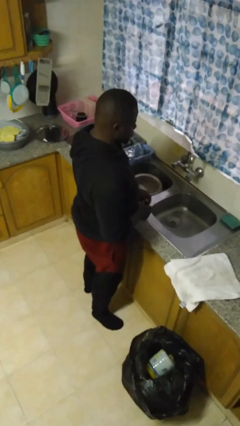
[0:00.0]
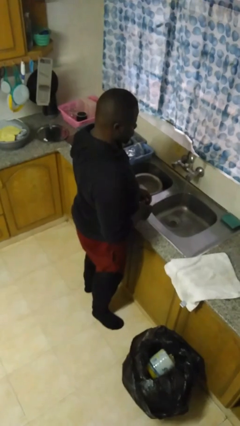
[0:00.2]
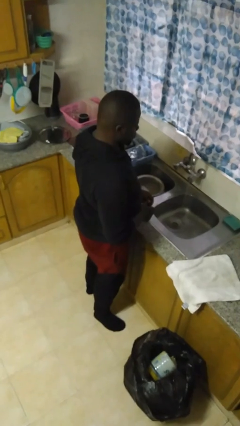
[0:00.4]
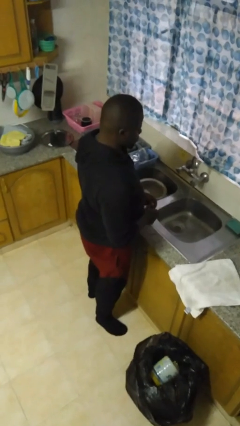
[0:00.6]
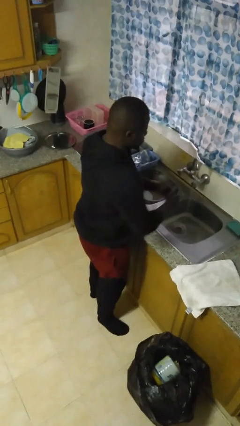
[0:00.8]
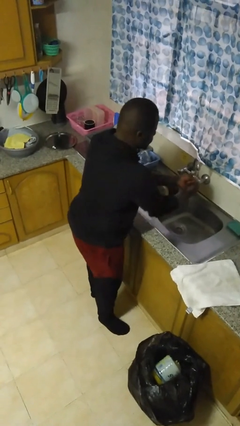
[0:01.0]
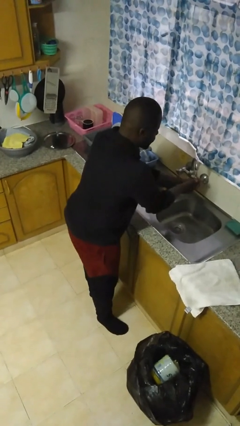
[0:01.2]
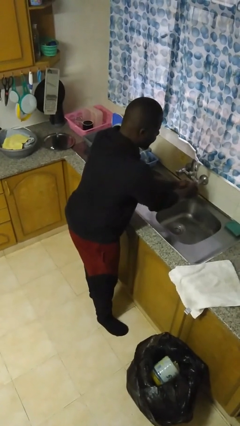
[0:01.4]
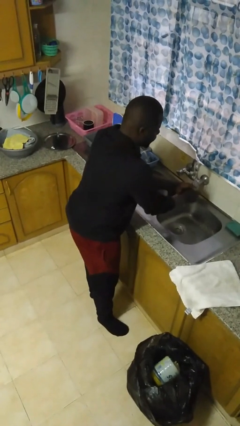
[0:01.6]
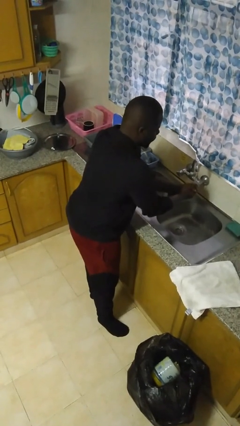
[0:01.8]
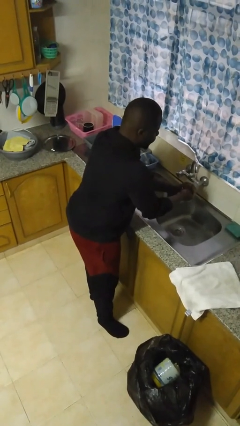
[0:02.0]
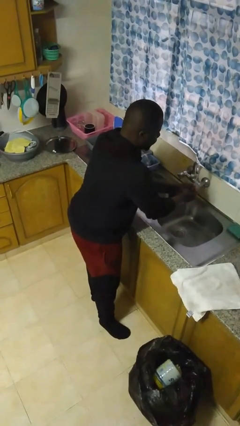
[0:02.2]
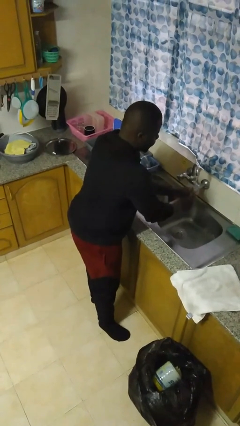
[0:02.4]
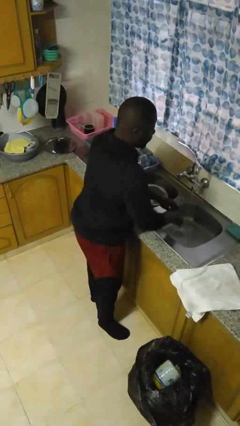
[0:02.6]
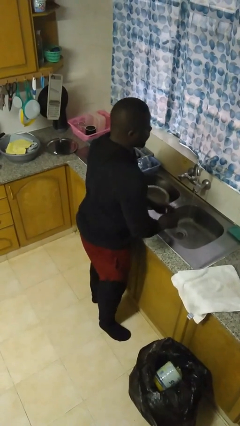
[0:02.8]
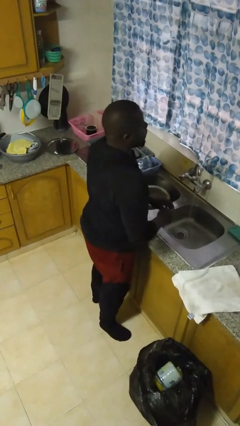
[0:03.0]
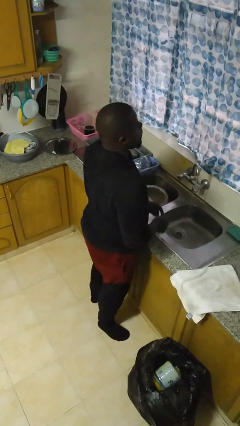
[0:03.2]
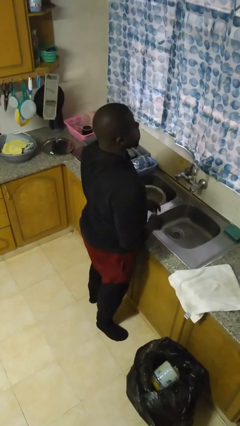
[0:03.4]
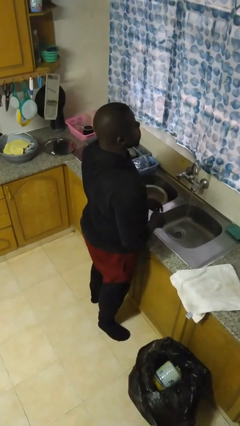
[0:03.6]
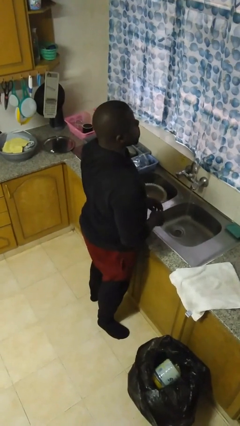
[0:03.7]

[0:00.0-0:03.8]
person washes hands

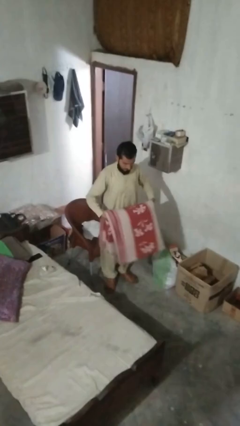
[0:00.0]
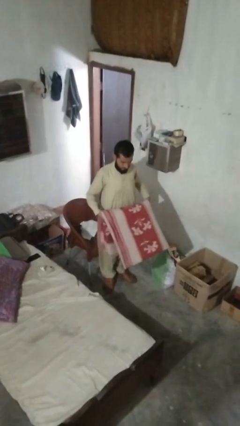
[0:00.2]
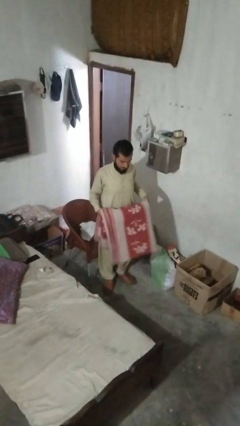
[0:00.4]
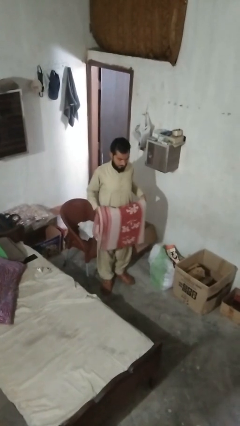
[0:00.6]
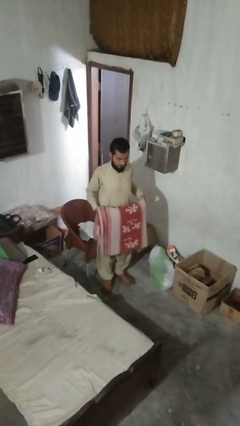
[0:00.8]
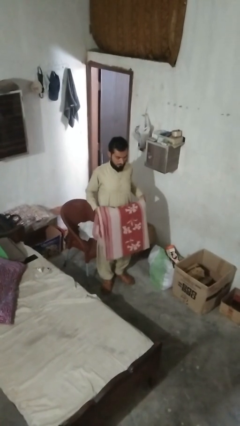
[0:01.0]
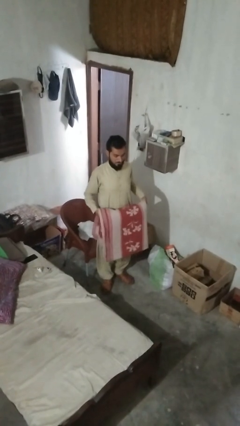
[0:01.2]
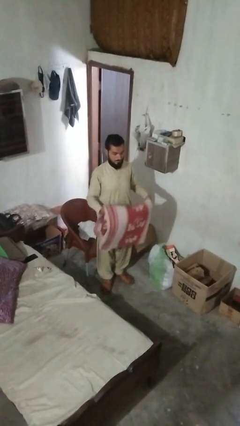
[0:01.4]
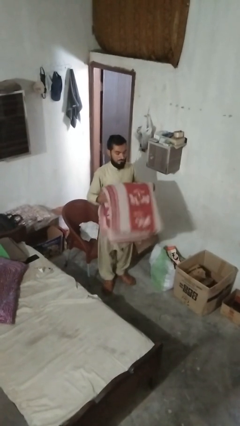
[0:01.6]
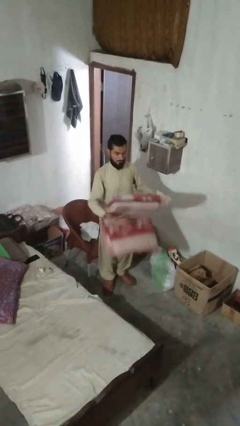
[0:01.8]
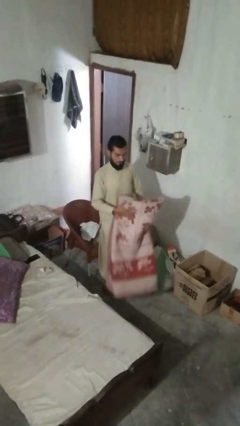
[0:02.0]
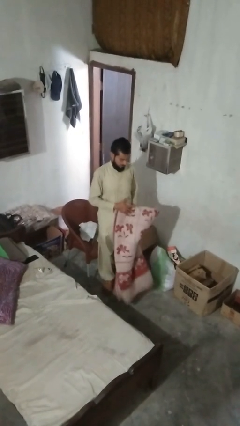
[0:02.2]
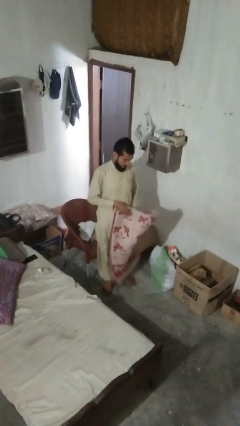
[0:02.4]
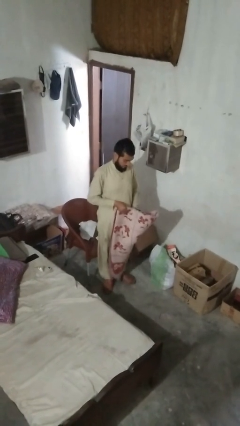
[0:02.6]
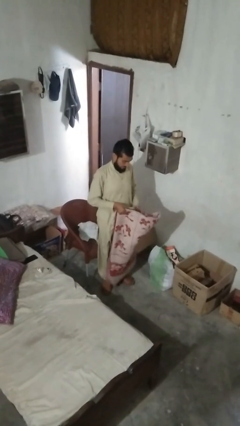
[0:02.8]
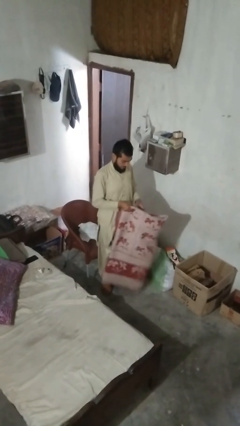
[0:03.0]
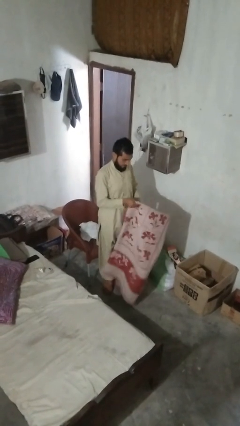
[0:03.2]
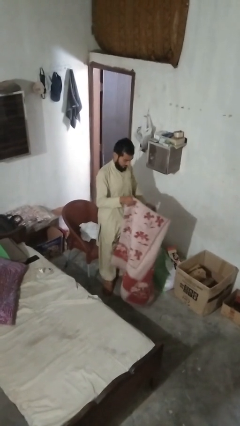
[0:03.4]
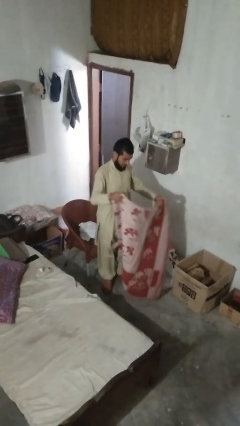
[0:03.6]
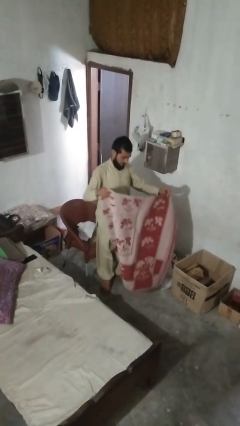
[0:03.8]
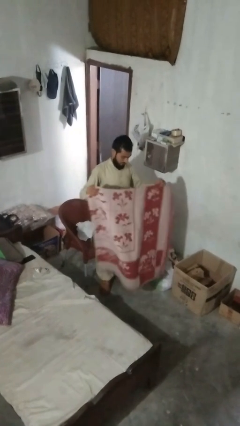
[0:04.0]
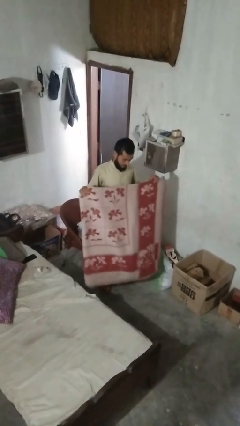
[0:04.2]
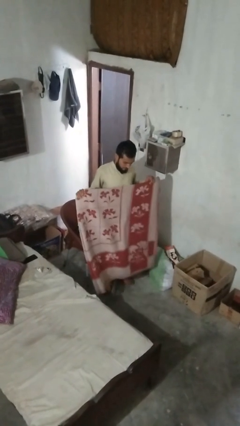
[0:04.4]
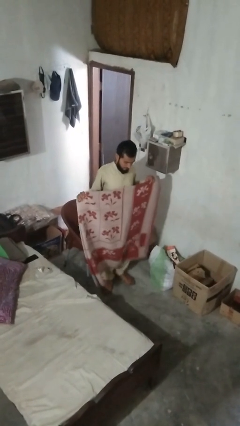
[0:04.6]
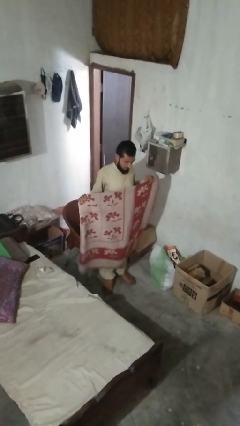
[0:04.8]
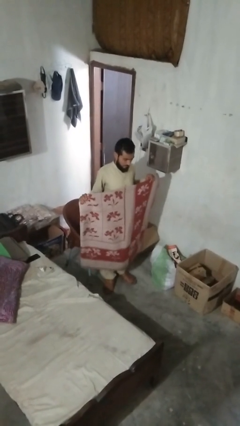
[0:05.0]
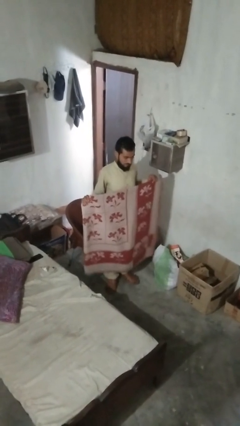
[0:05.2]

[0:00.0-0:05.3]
person unfolds blanket

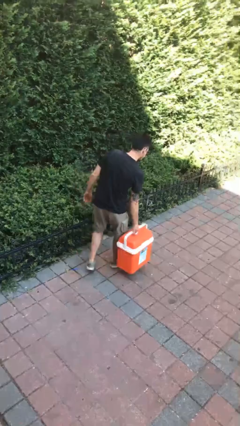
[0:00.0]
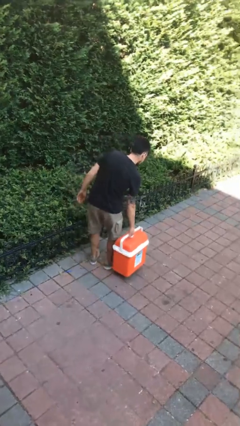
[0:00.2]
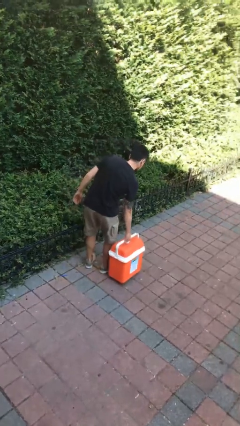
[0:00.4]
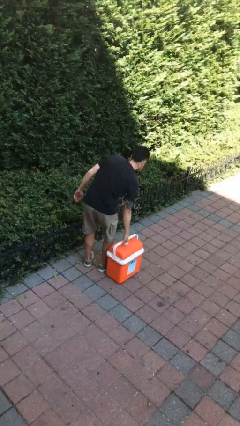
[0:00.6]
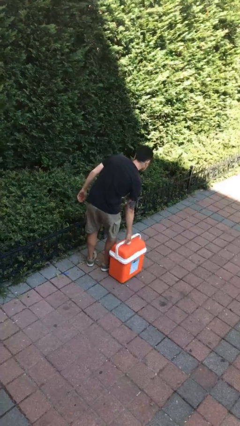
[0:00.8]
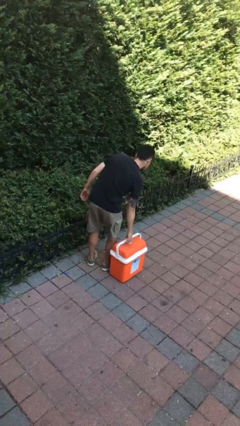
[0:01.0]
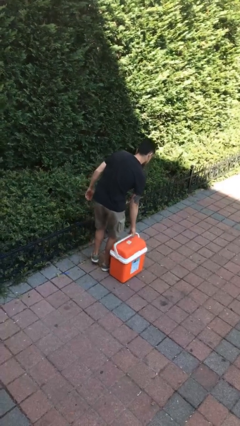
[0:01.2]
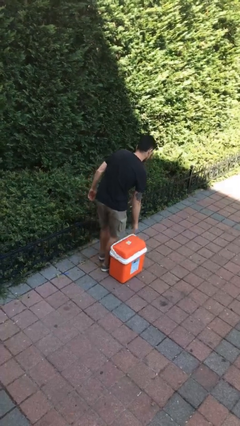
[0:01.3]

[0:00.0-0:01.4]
person puts down object on floor

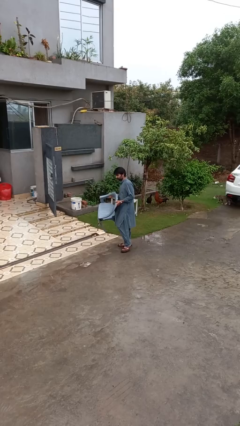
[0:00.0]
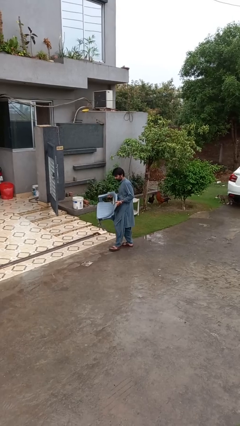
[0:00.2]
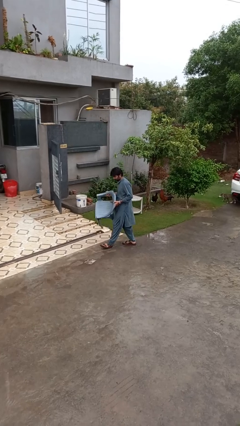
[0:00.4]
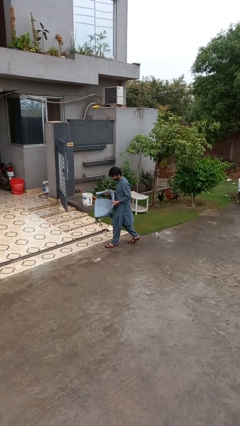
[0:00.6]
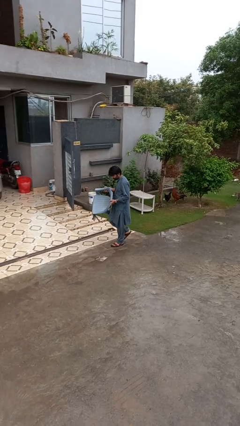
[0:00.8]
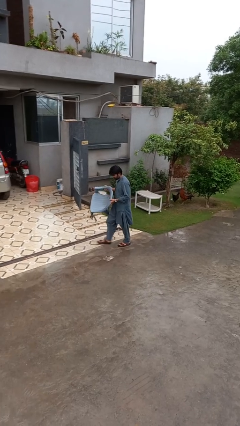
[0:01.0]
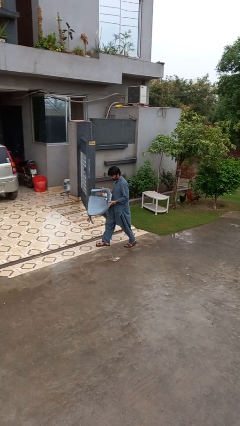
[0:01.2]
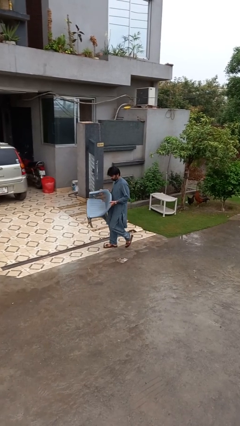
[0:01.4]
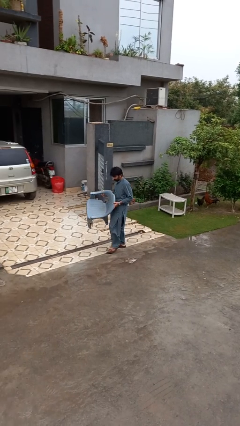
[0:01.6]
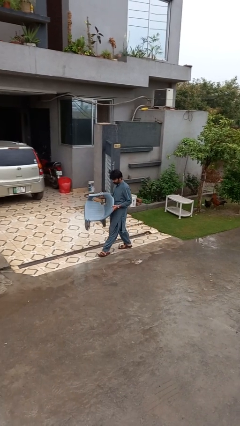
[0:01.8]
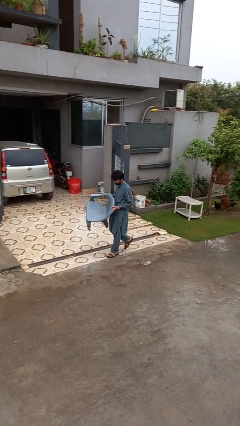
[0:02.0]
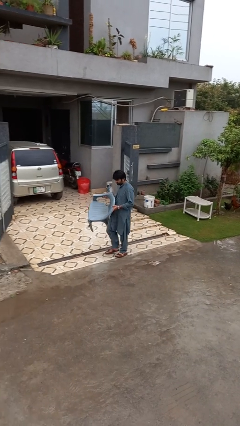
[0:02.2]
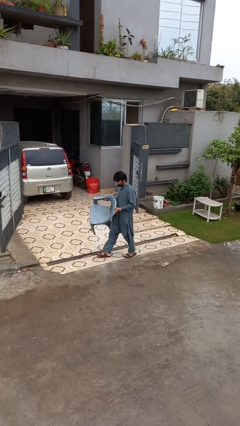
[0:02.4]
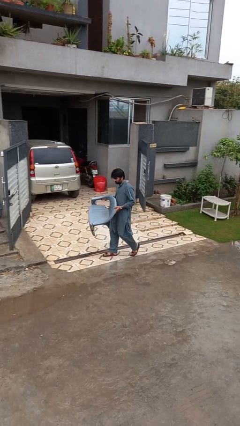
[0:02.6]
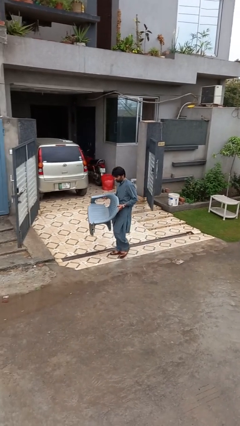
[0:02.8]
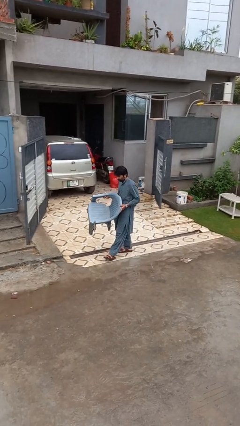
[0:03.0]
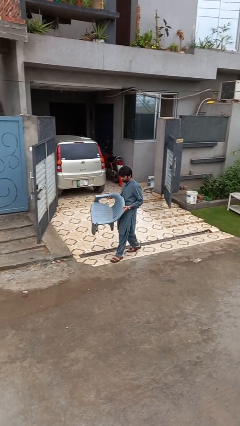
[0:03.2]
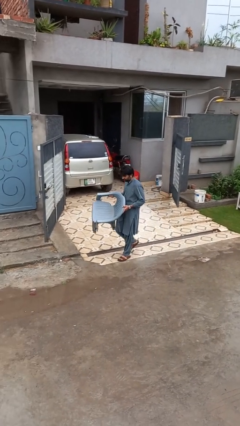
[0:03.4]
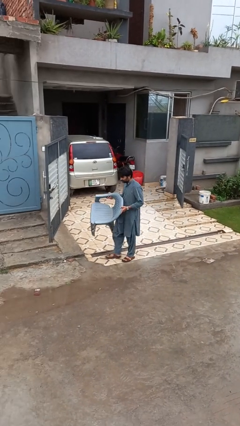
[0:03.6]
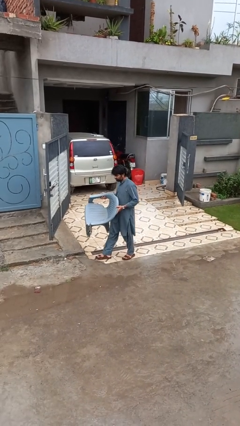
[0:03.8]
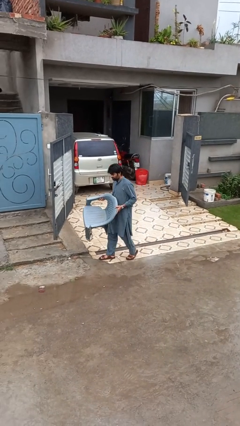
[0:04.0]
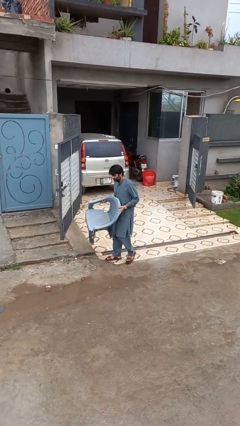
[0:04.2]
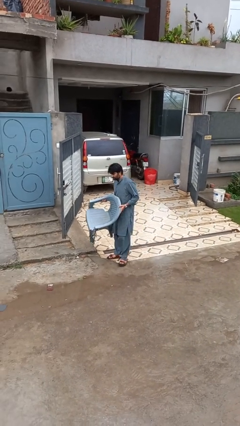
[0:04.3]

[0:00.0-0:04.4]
person carries furniture

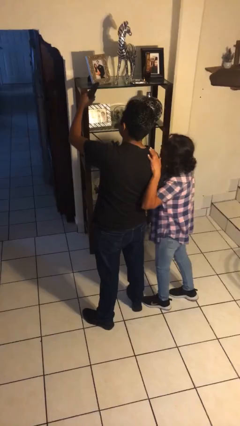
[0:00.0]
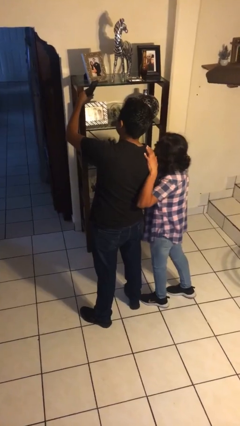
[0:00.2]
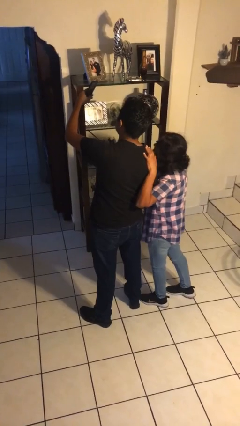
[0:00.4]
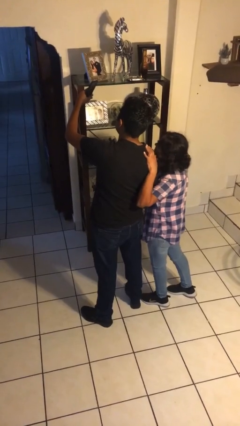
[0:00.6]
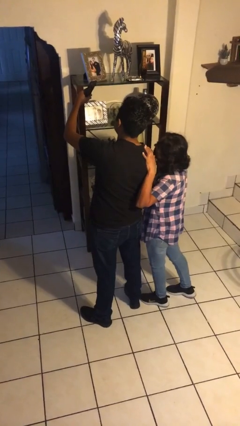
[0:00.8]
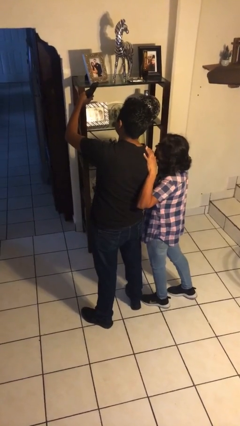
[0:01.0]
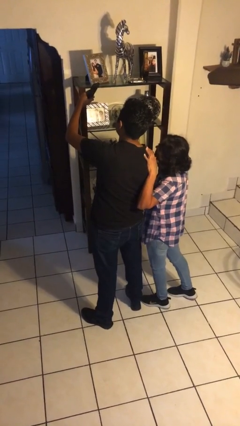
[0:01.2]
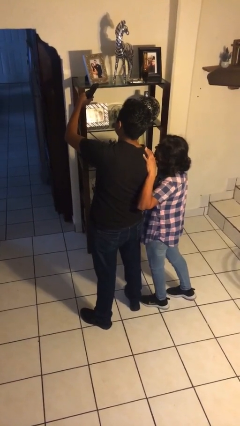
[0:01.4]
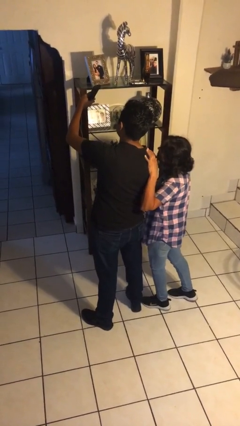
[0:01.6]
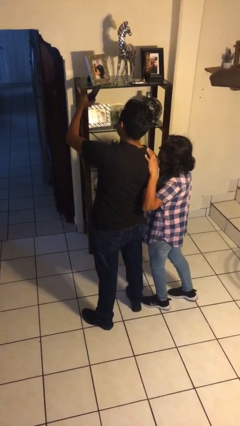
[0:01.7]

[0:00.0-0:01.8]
person takes selfie with person

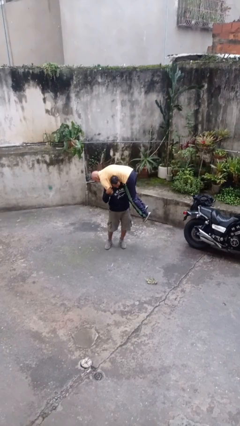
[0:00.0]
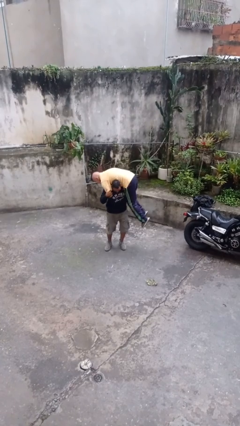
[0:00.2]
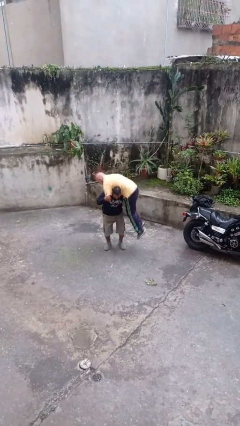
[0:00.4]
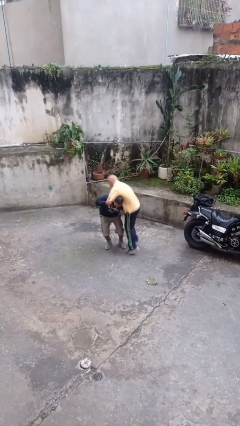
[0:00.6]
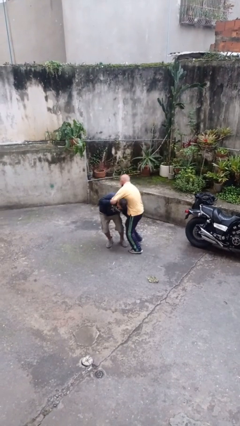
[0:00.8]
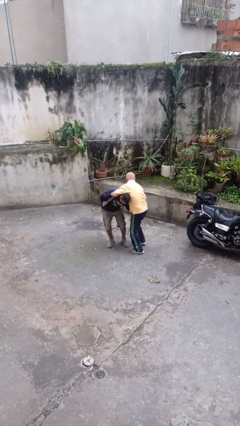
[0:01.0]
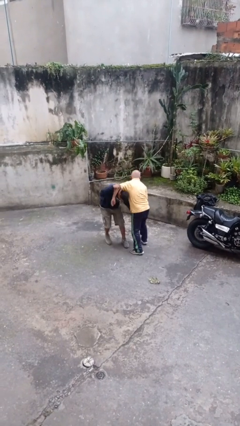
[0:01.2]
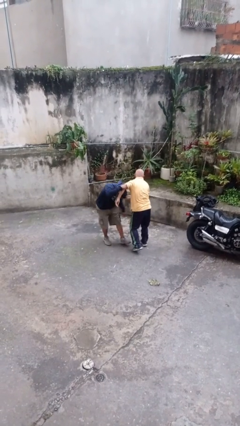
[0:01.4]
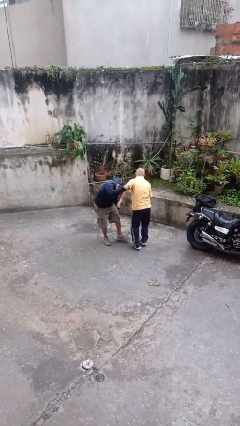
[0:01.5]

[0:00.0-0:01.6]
person puts down person
